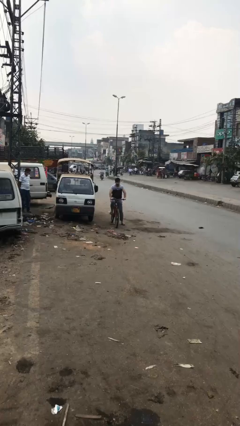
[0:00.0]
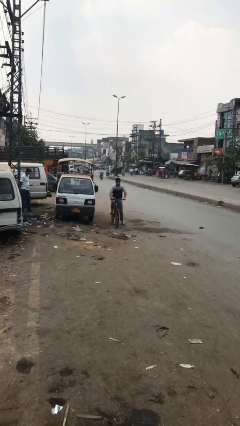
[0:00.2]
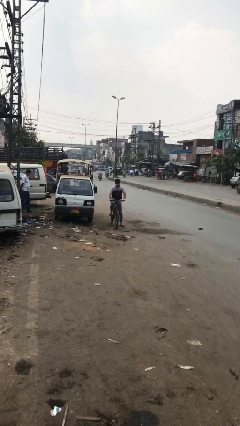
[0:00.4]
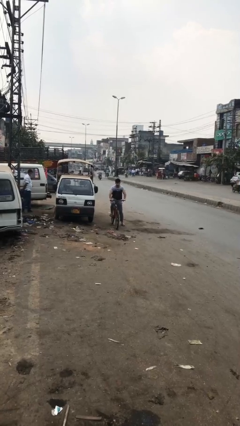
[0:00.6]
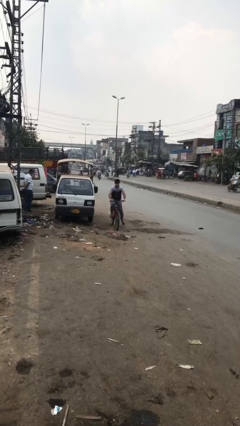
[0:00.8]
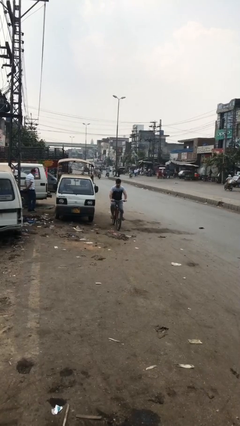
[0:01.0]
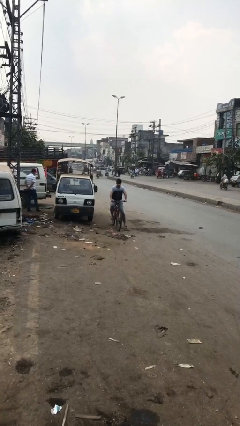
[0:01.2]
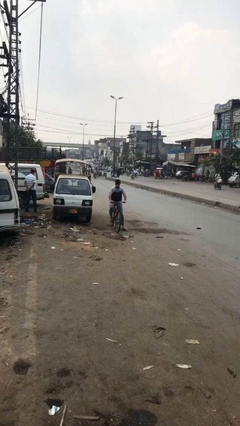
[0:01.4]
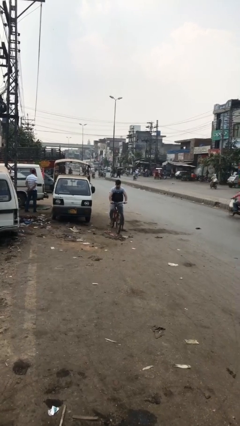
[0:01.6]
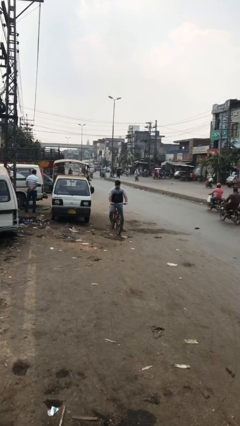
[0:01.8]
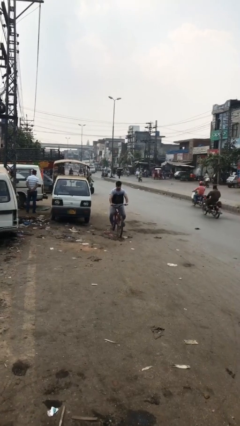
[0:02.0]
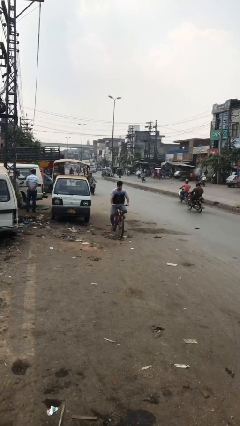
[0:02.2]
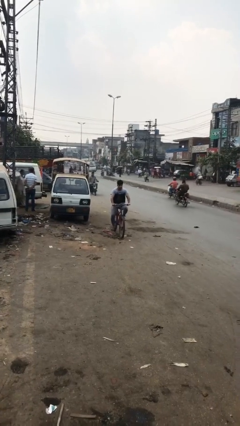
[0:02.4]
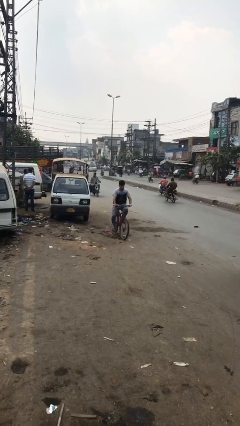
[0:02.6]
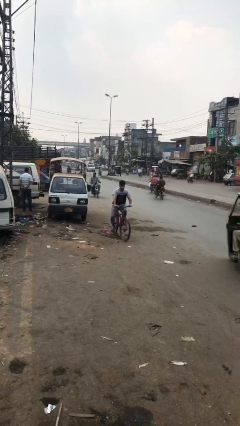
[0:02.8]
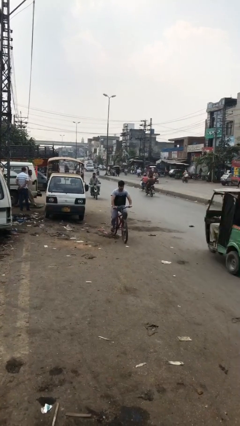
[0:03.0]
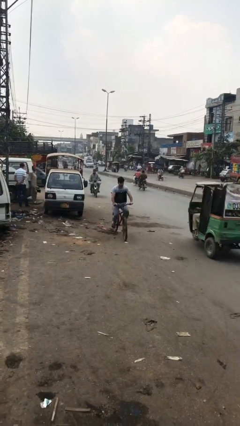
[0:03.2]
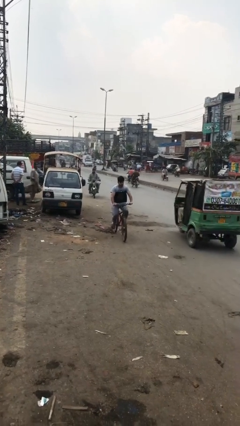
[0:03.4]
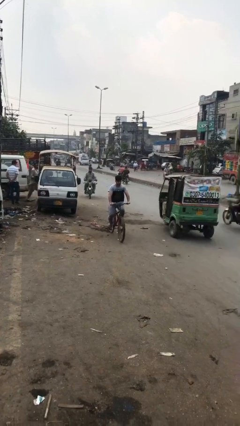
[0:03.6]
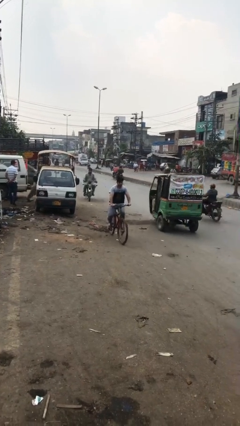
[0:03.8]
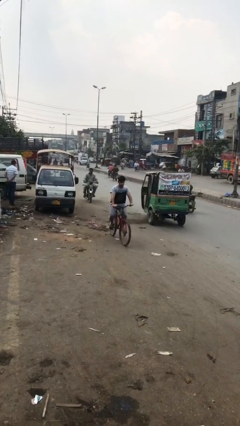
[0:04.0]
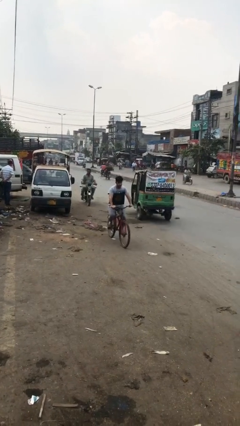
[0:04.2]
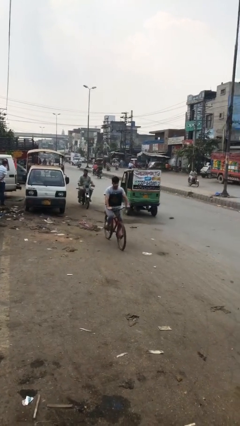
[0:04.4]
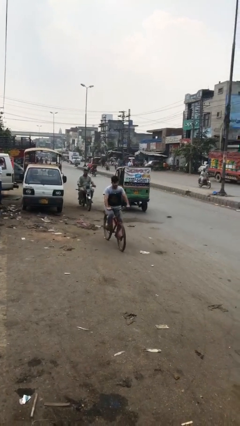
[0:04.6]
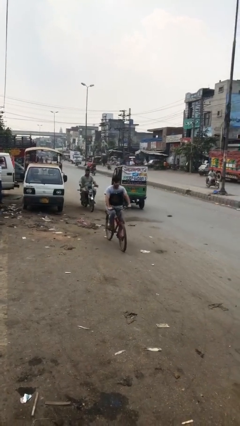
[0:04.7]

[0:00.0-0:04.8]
person rides bicycle

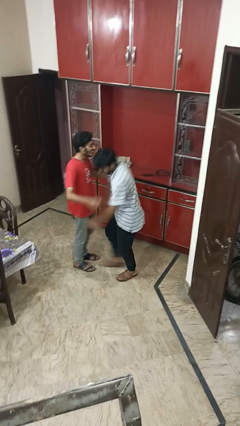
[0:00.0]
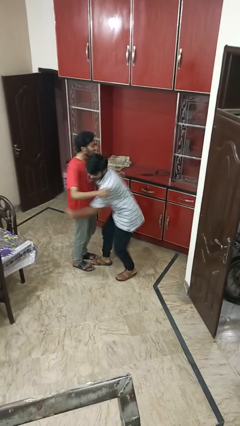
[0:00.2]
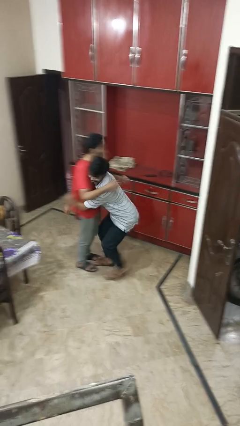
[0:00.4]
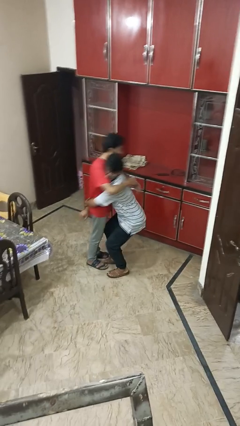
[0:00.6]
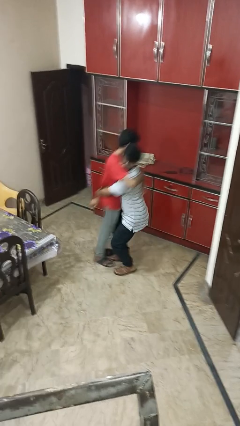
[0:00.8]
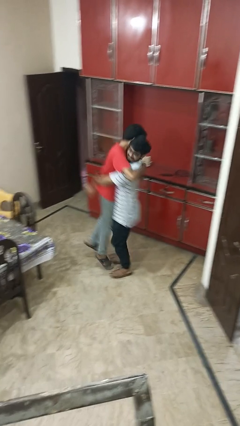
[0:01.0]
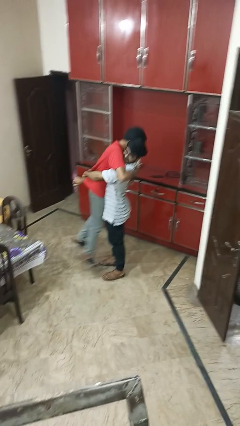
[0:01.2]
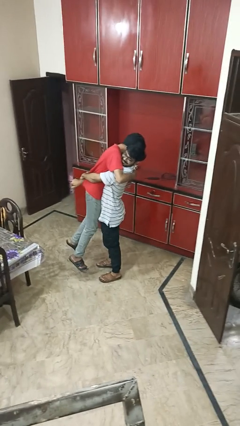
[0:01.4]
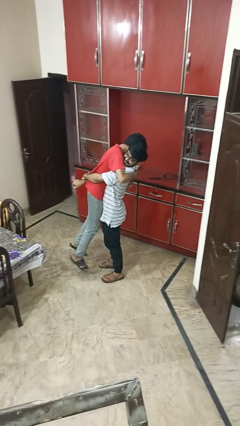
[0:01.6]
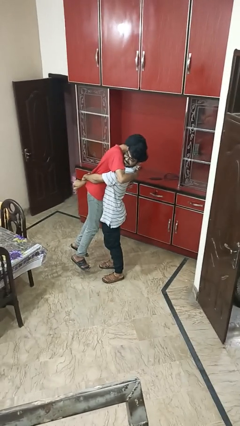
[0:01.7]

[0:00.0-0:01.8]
person picks up person

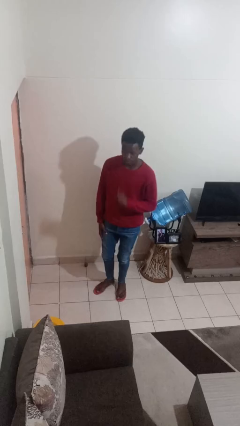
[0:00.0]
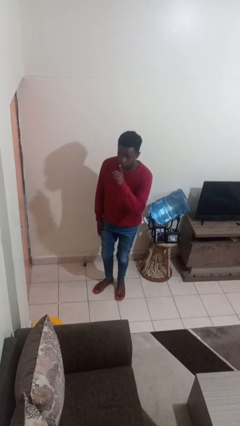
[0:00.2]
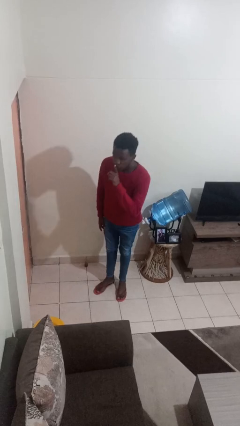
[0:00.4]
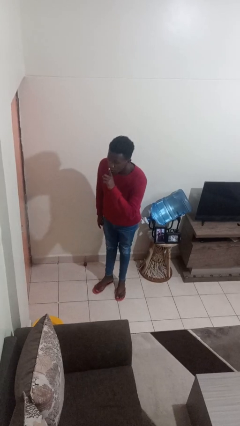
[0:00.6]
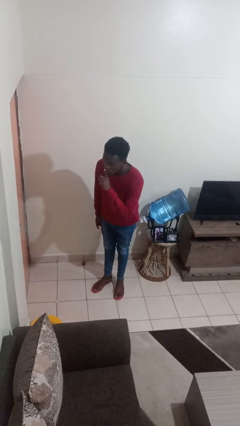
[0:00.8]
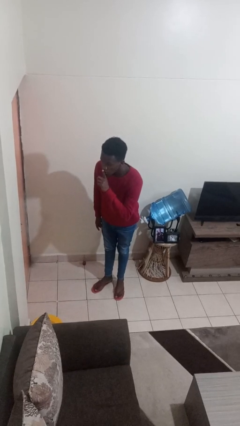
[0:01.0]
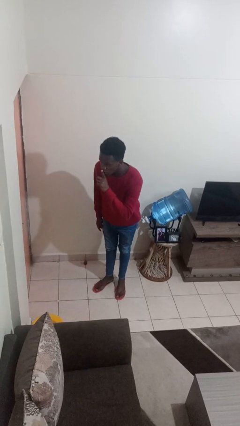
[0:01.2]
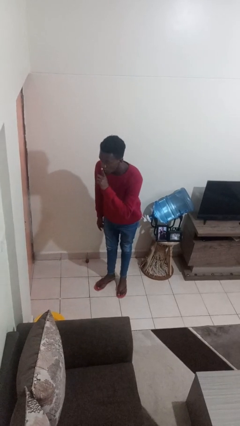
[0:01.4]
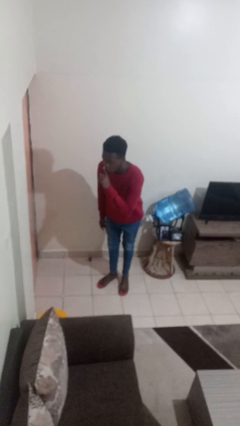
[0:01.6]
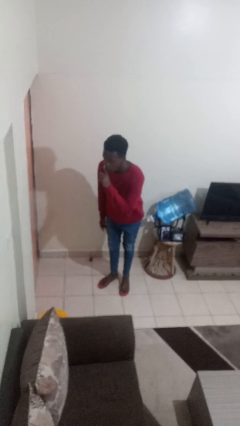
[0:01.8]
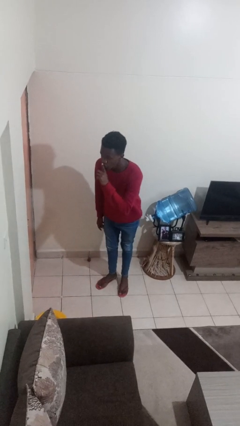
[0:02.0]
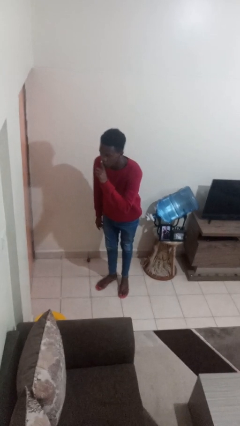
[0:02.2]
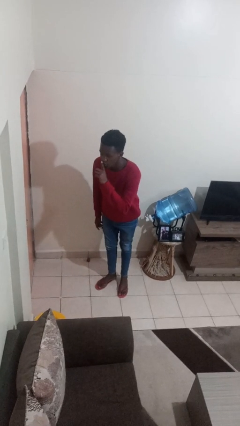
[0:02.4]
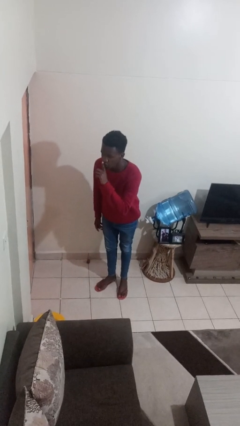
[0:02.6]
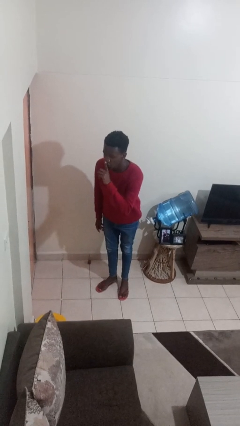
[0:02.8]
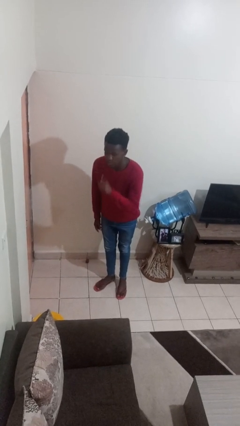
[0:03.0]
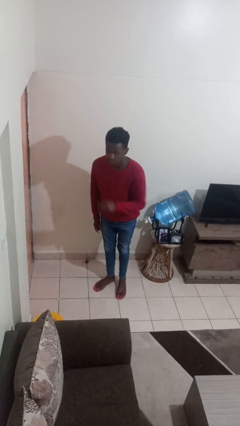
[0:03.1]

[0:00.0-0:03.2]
person gestures be quiet

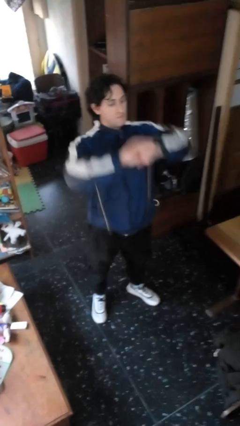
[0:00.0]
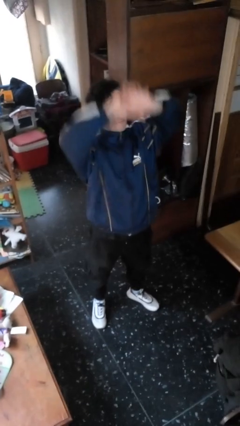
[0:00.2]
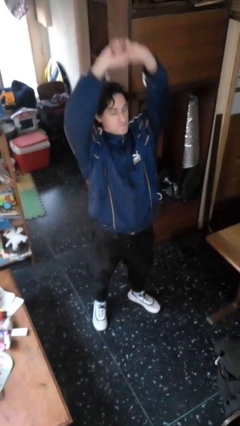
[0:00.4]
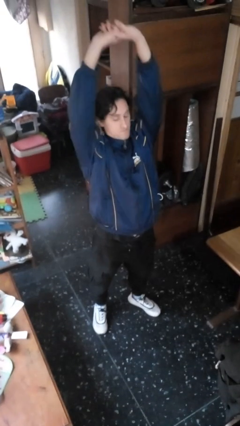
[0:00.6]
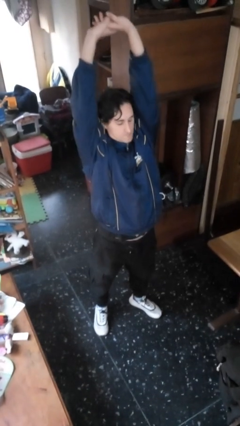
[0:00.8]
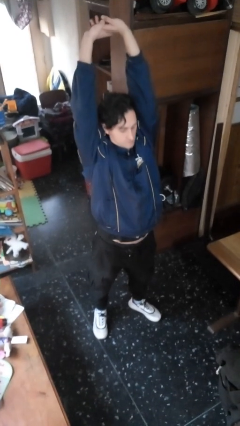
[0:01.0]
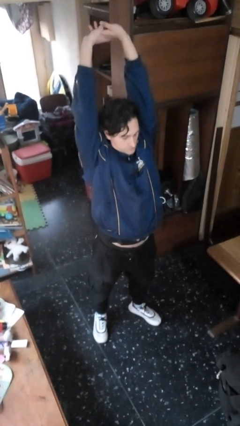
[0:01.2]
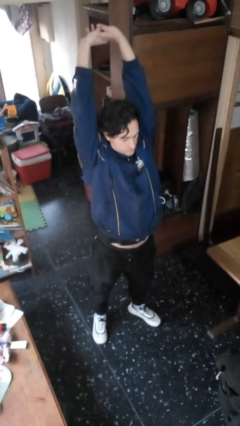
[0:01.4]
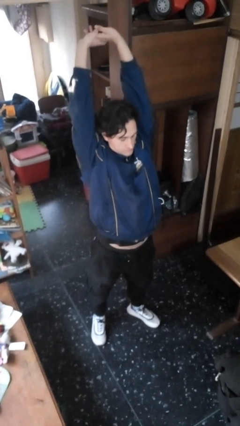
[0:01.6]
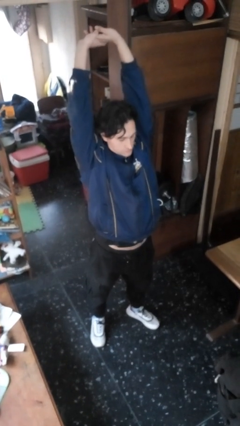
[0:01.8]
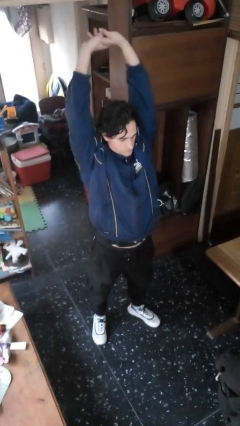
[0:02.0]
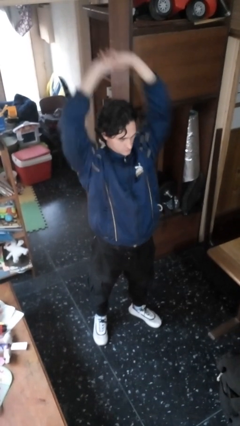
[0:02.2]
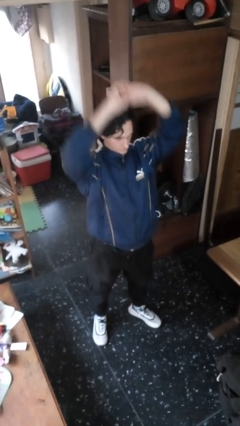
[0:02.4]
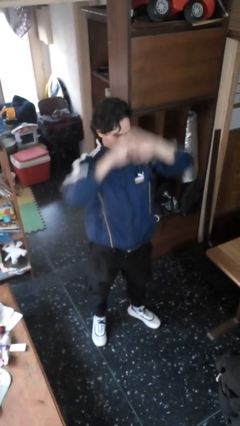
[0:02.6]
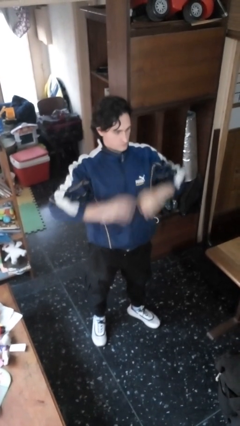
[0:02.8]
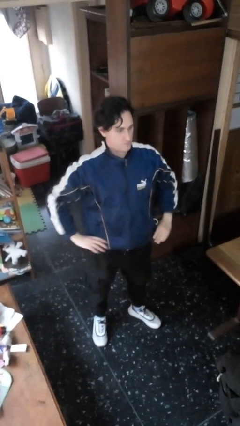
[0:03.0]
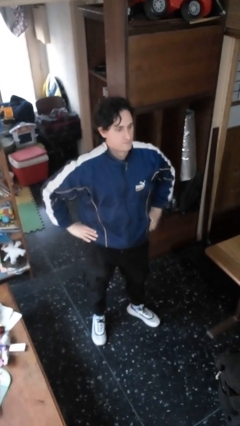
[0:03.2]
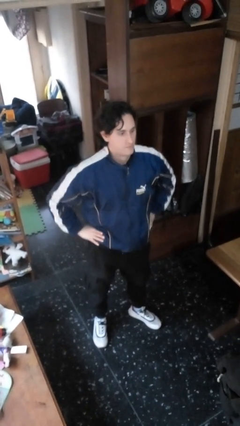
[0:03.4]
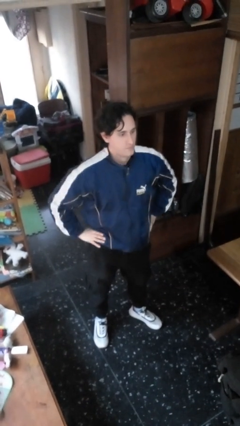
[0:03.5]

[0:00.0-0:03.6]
person stretches arms over head

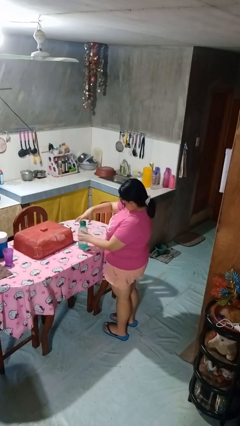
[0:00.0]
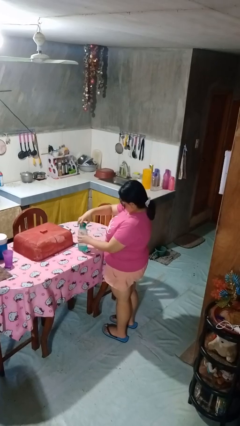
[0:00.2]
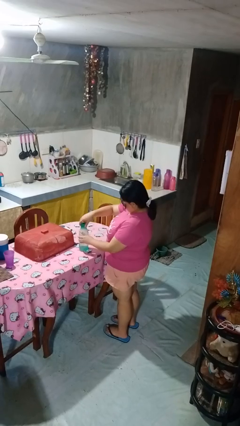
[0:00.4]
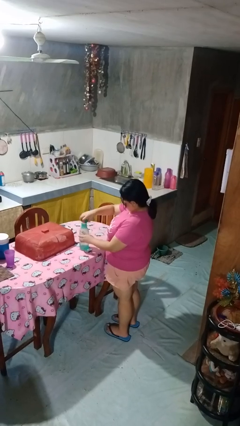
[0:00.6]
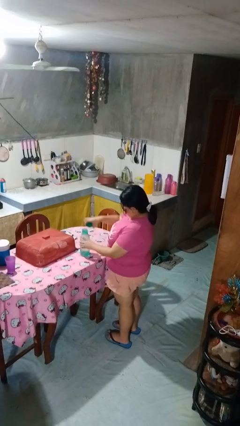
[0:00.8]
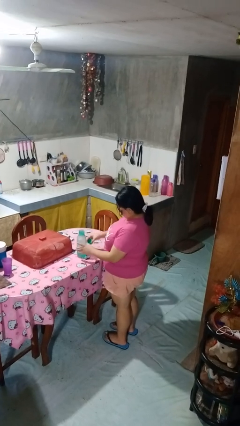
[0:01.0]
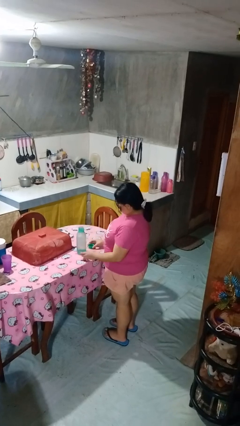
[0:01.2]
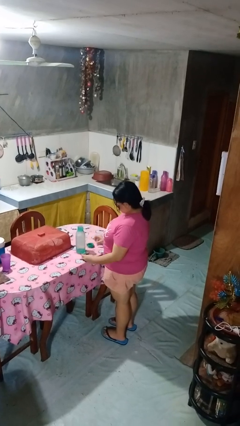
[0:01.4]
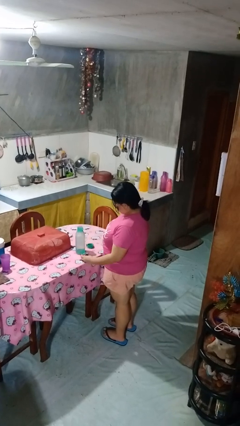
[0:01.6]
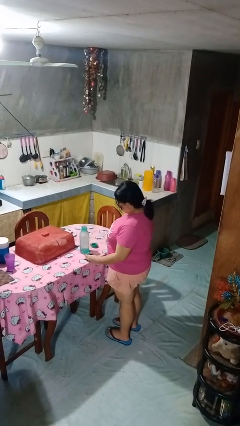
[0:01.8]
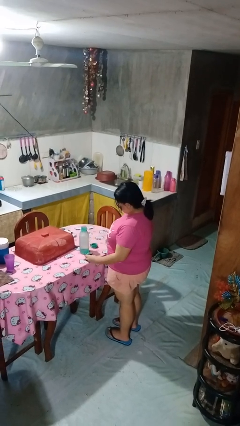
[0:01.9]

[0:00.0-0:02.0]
person unscrews lid from bottle

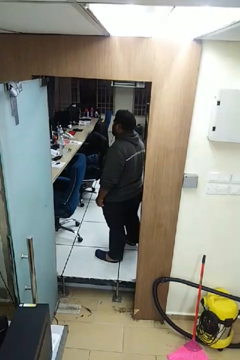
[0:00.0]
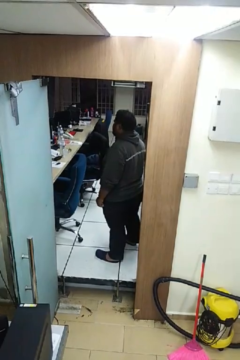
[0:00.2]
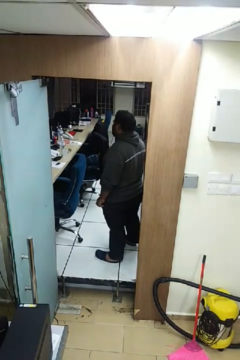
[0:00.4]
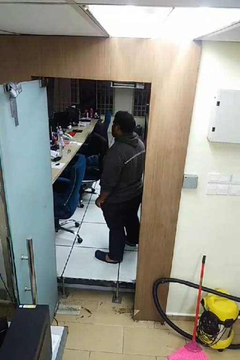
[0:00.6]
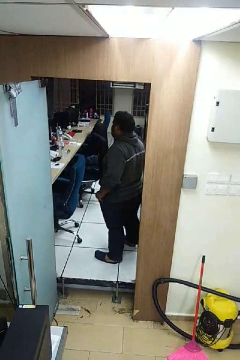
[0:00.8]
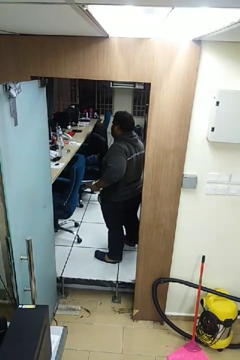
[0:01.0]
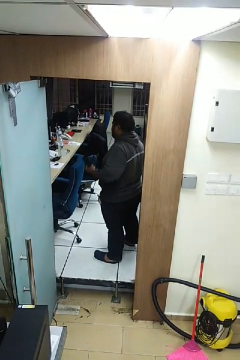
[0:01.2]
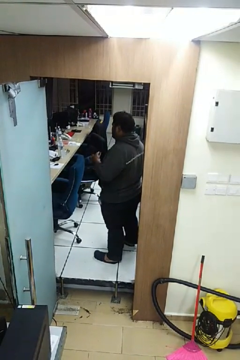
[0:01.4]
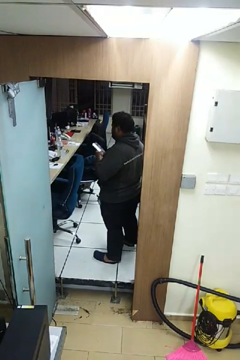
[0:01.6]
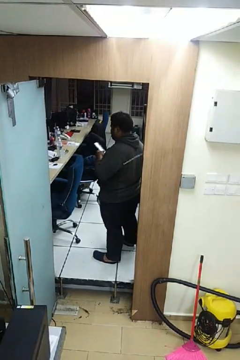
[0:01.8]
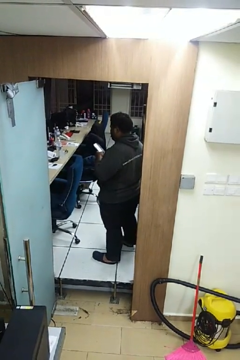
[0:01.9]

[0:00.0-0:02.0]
person takes phone from pocket

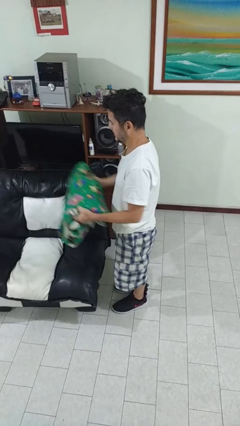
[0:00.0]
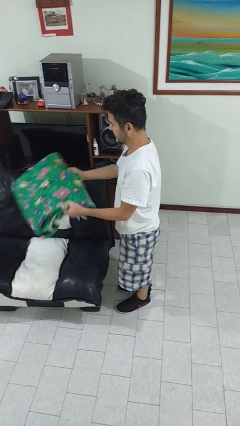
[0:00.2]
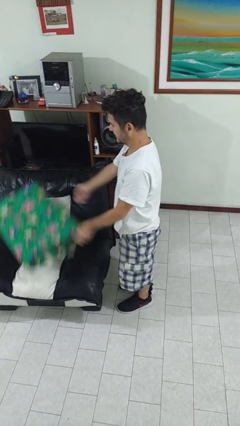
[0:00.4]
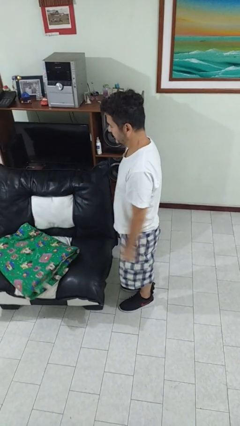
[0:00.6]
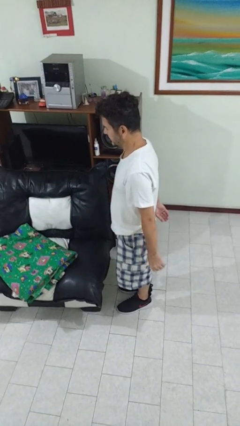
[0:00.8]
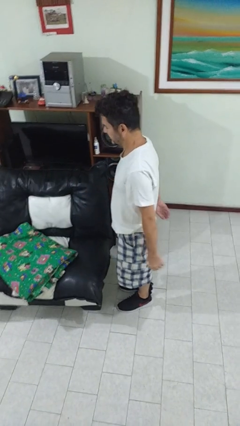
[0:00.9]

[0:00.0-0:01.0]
person puts down object on couch
